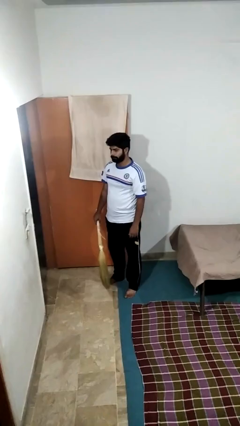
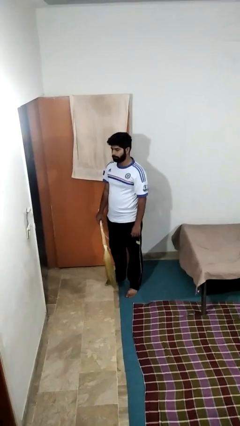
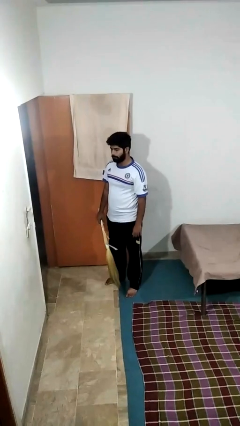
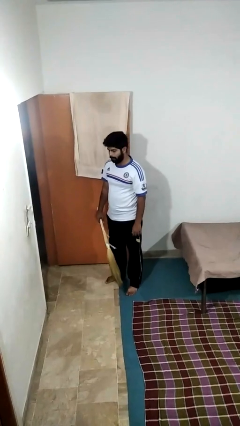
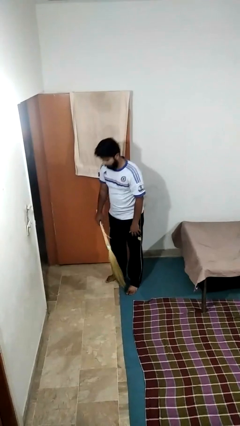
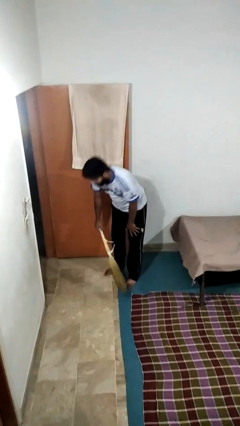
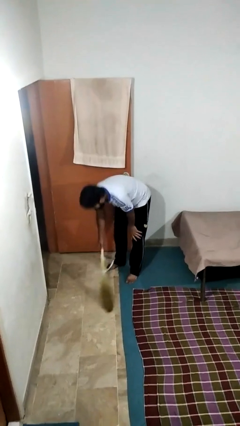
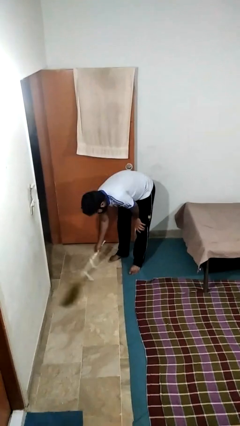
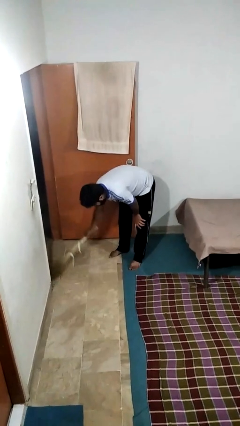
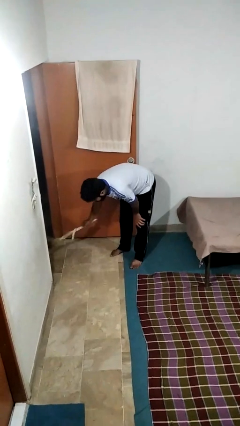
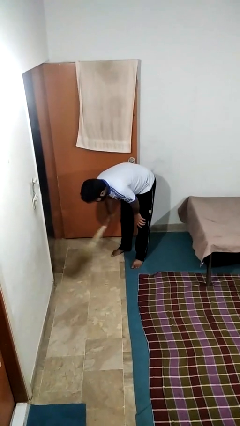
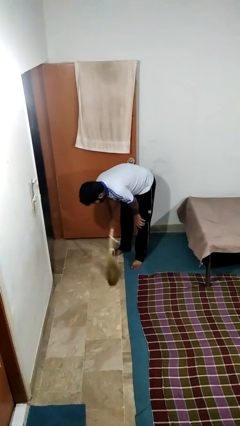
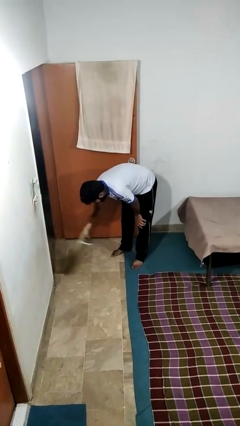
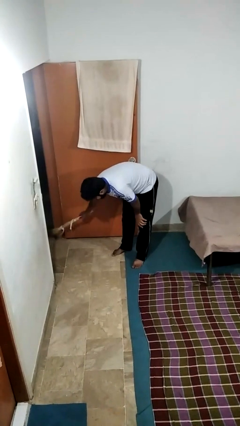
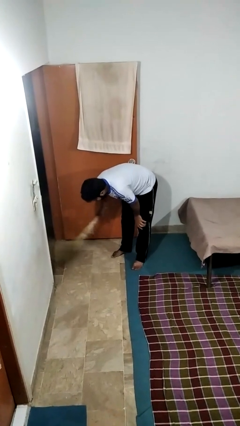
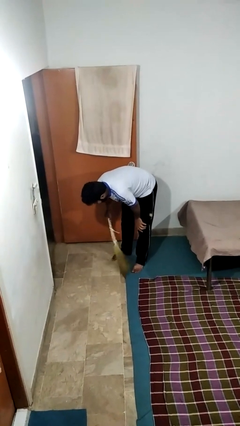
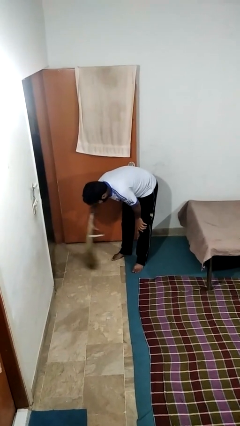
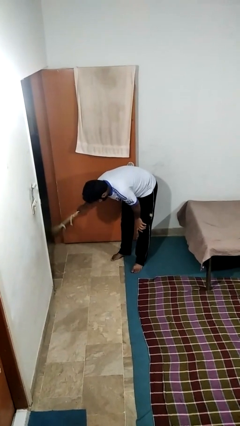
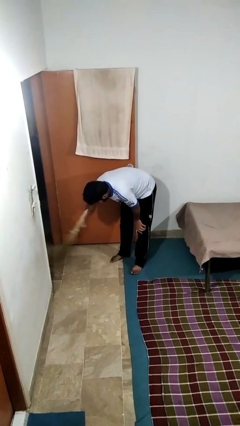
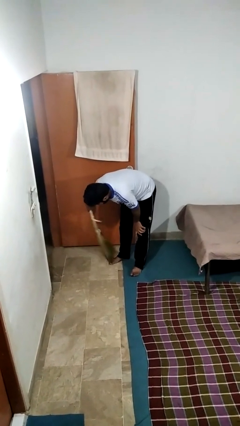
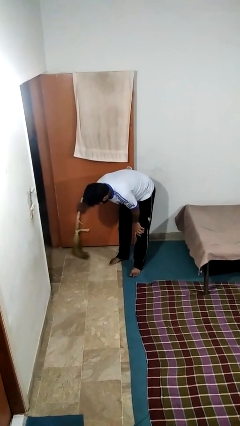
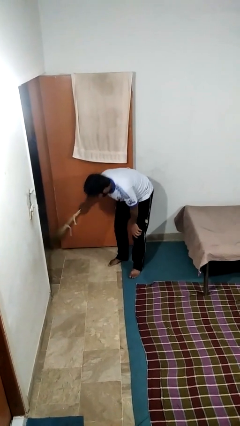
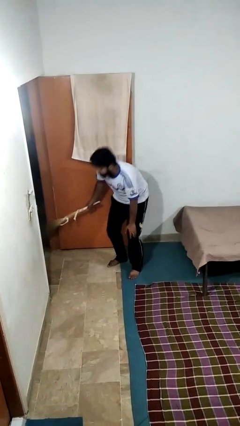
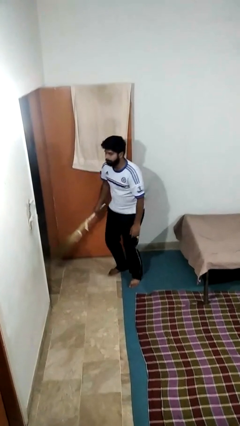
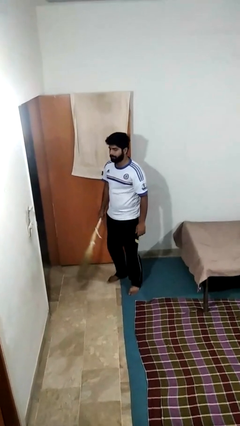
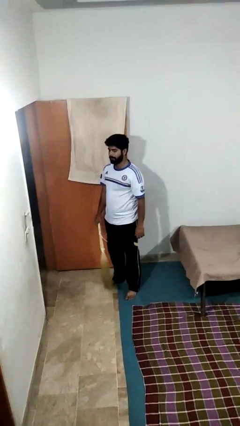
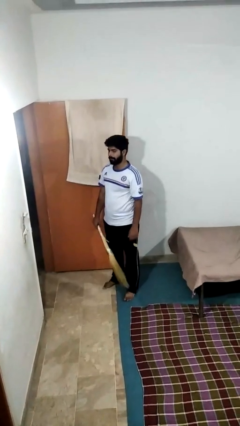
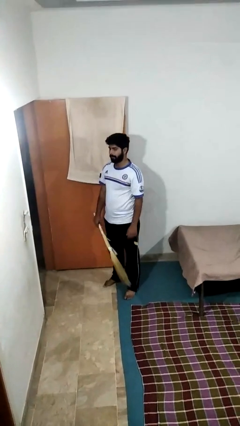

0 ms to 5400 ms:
person sweeps floor

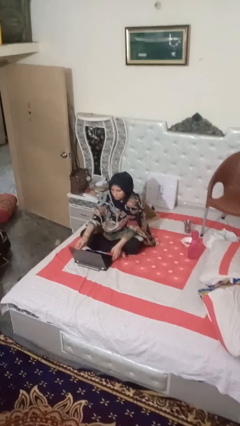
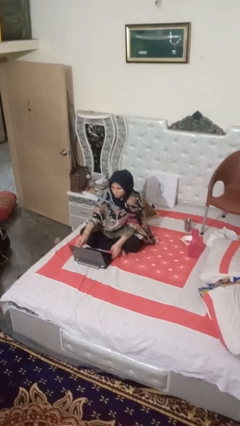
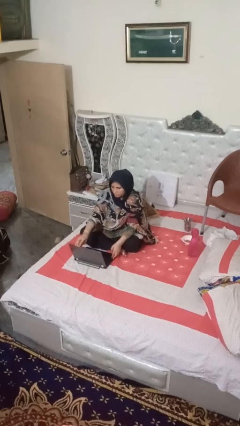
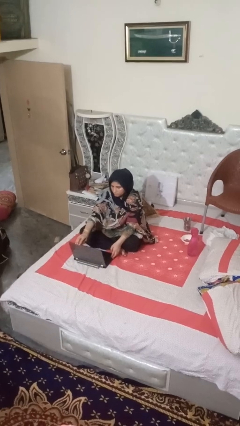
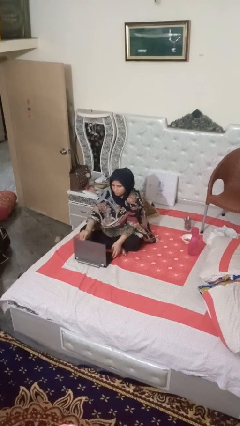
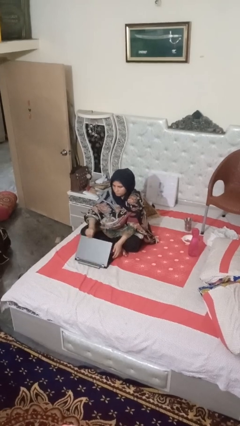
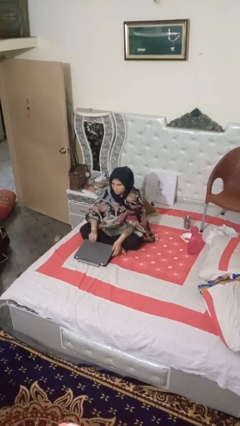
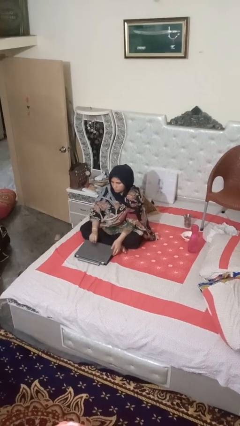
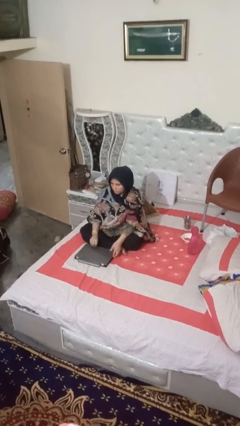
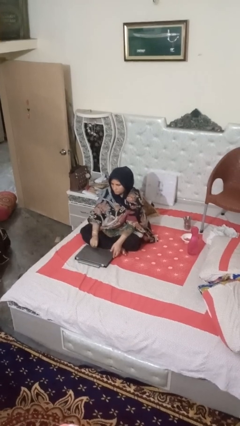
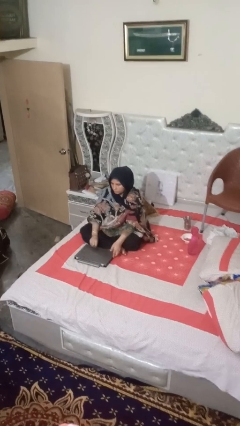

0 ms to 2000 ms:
person closes laptop

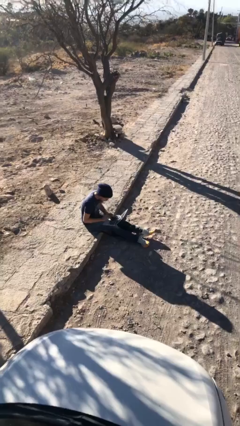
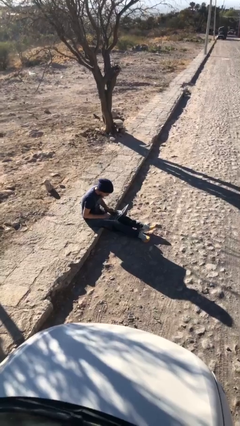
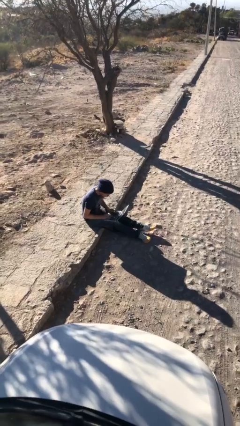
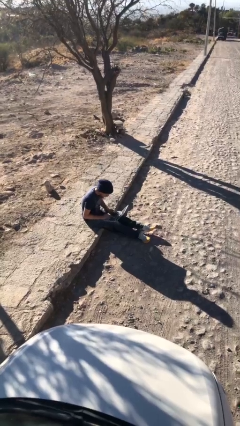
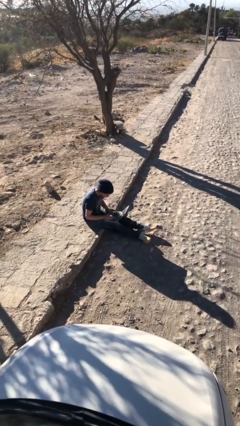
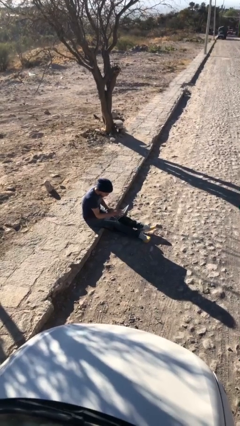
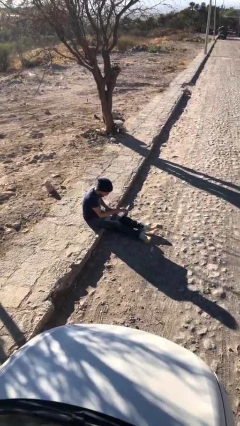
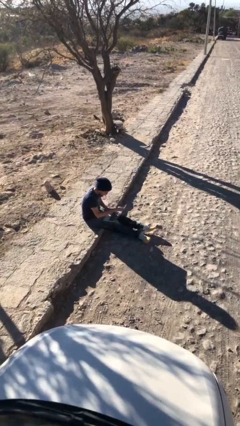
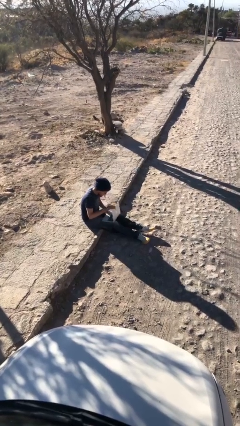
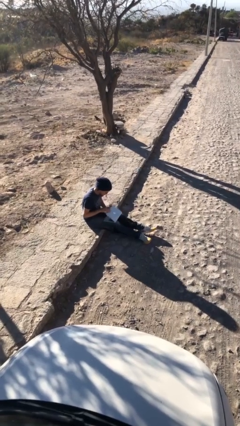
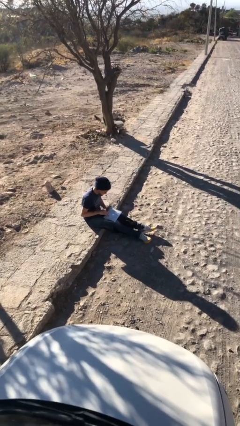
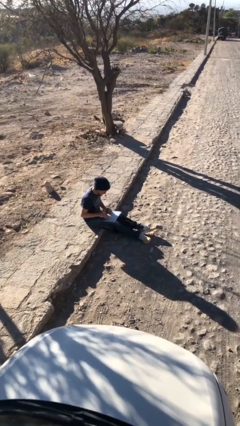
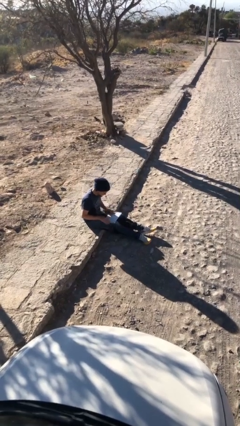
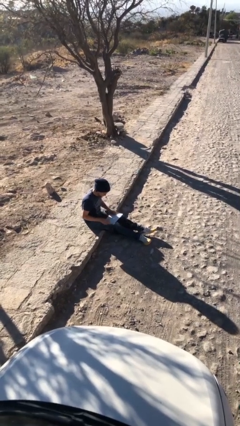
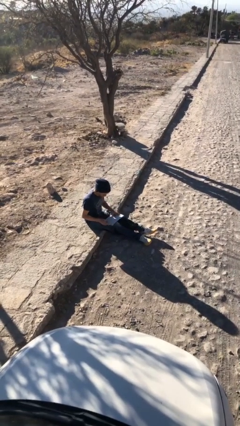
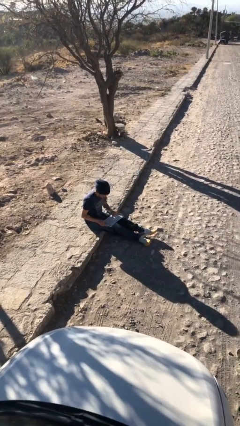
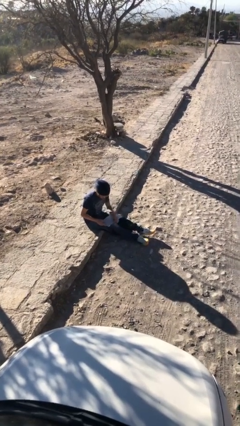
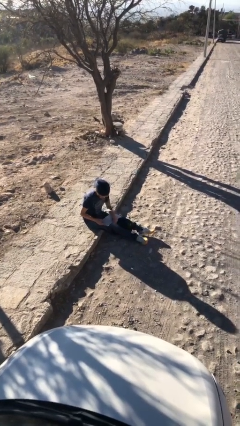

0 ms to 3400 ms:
person interacts with laptop

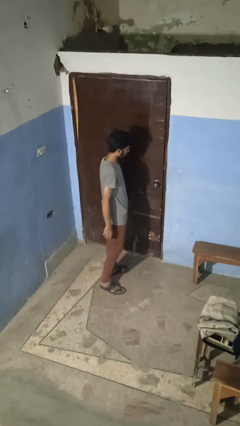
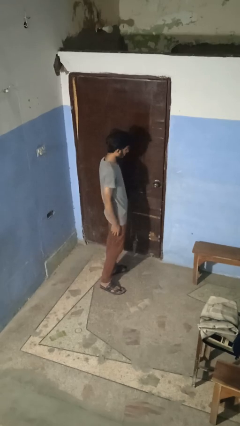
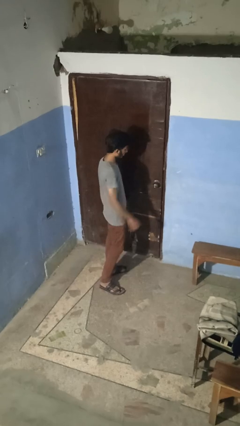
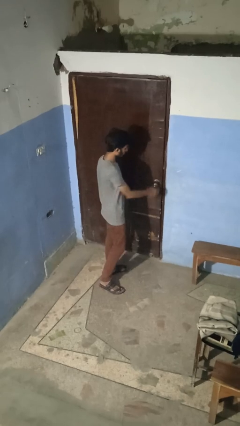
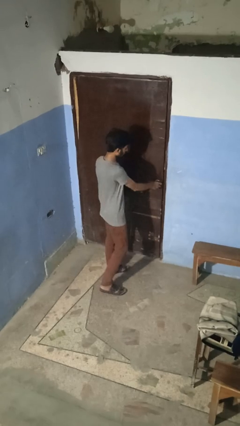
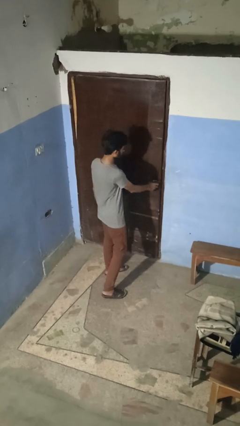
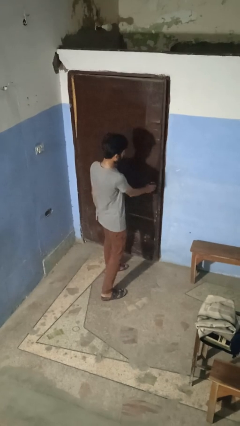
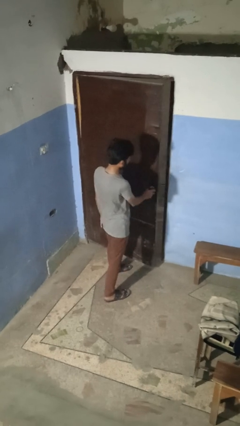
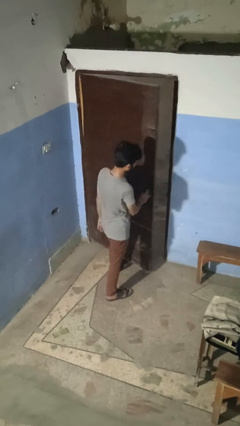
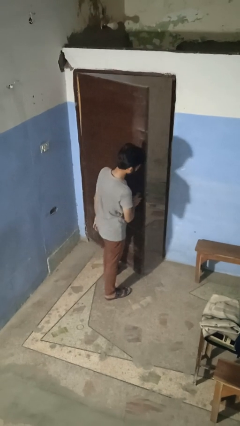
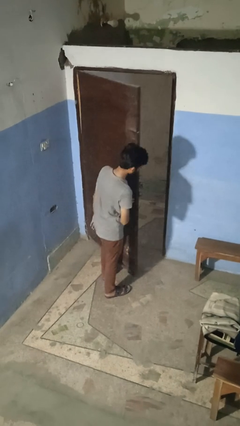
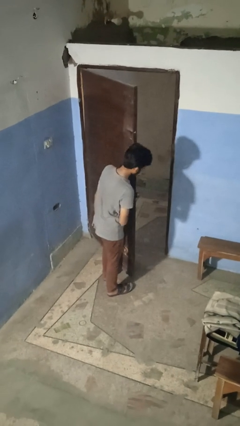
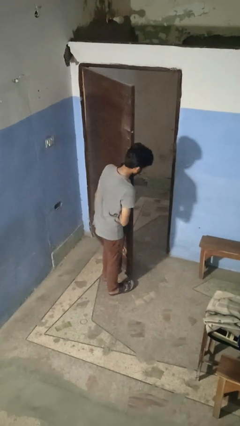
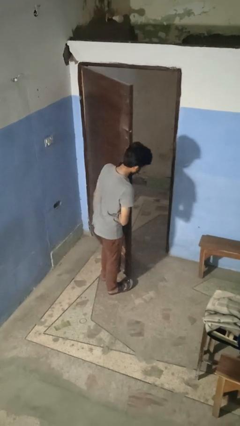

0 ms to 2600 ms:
person opens facility door

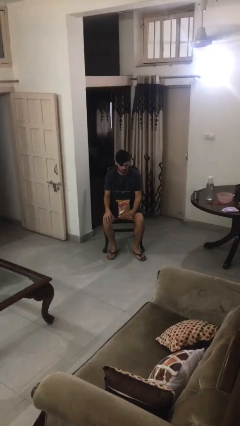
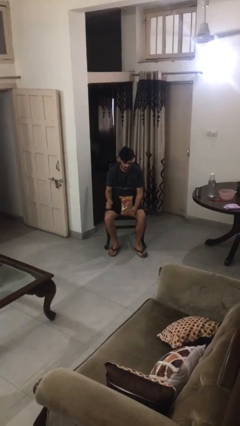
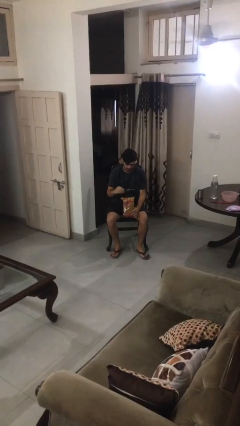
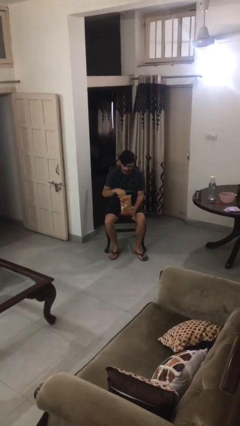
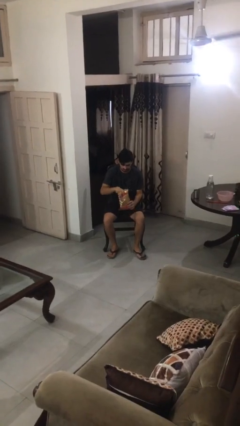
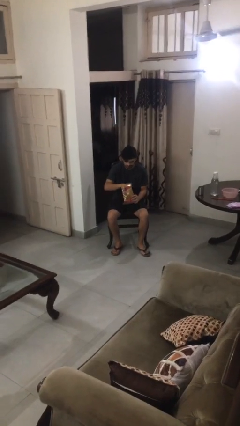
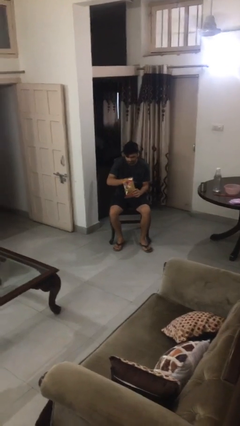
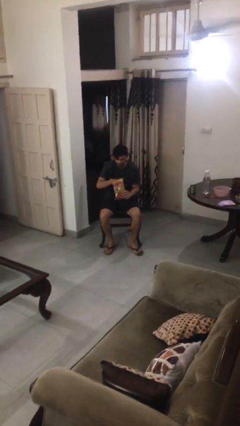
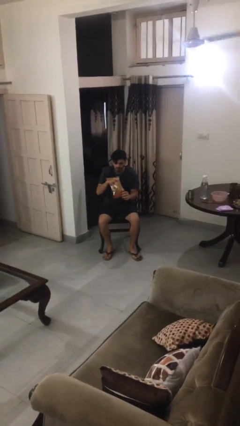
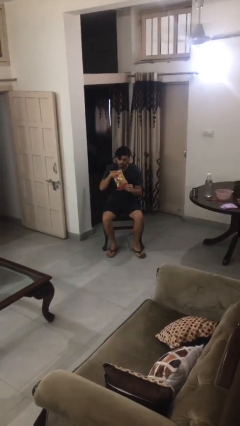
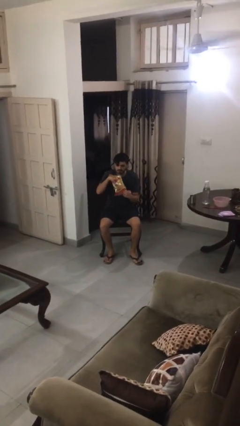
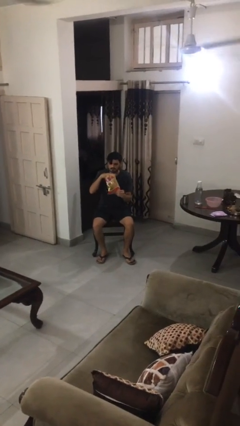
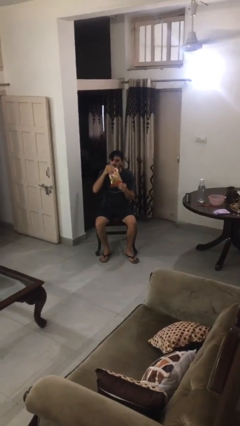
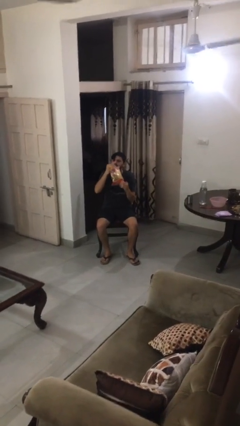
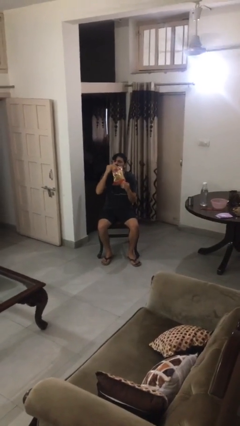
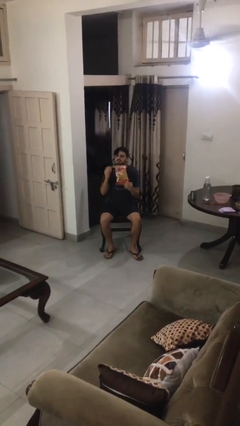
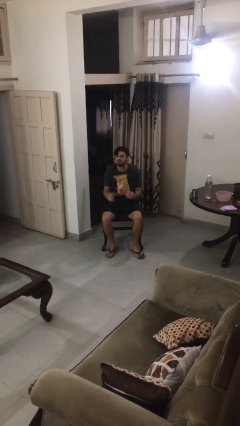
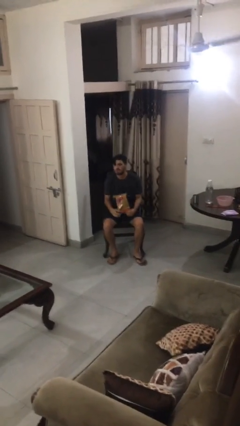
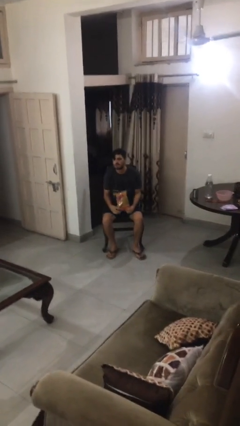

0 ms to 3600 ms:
person eats snack from bag

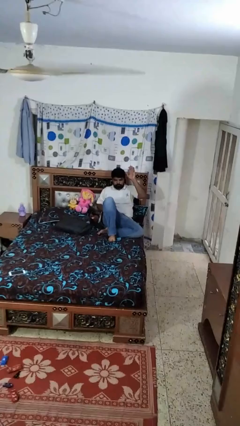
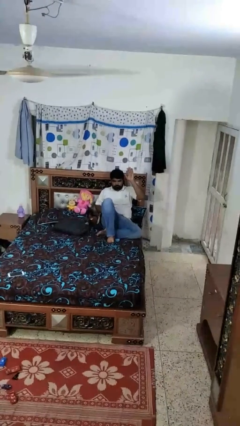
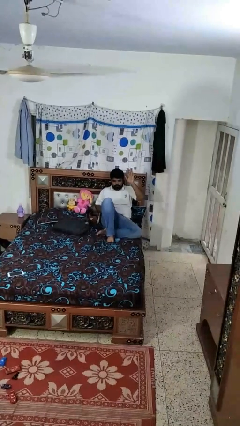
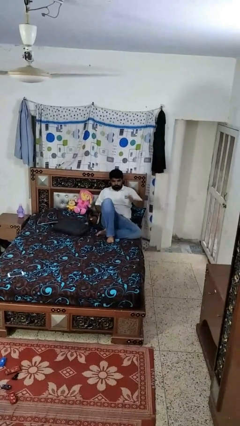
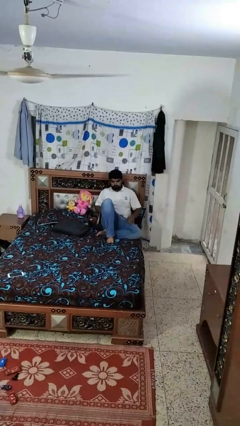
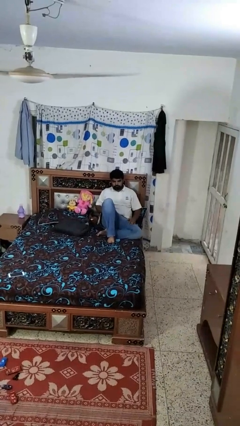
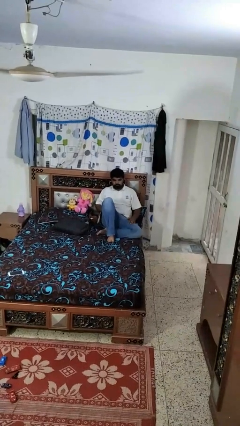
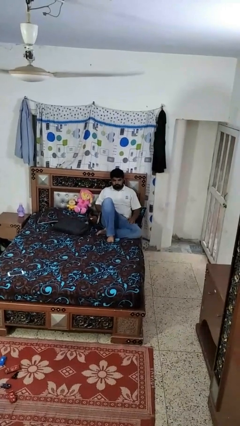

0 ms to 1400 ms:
person gestures lower hand
